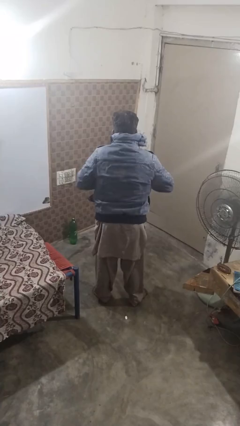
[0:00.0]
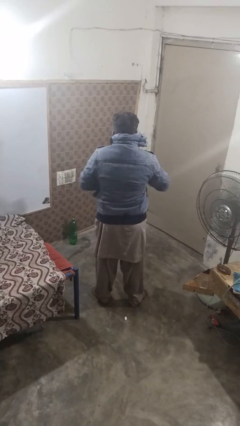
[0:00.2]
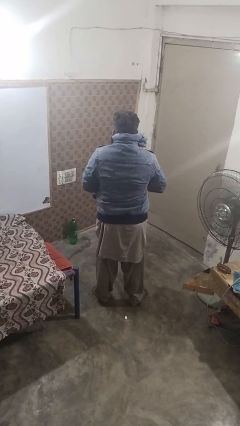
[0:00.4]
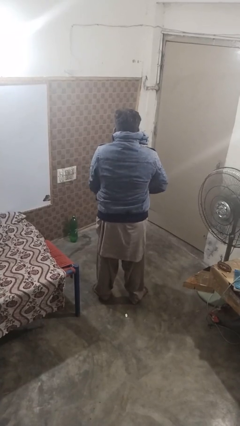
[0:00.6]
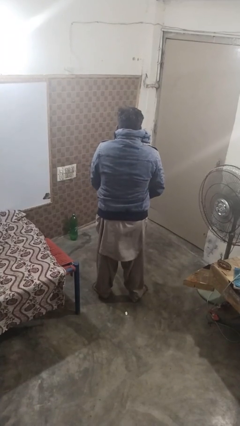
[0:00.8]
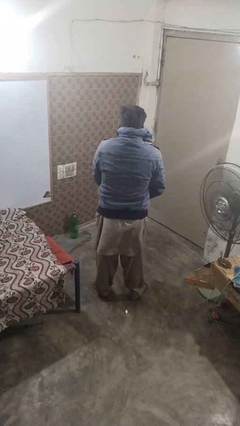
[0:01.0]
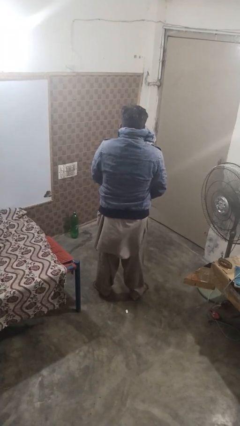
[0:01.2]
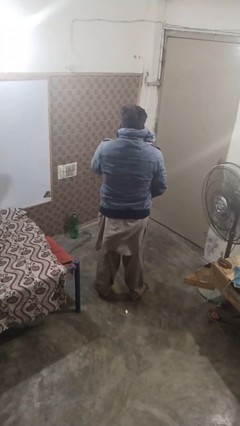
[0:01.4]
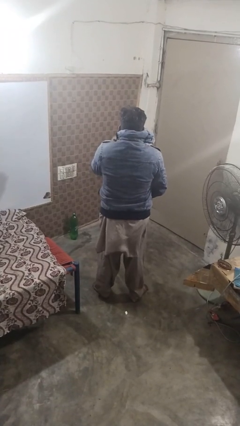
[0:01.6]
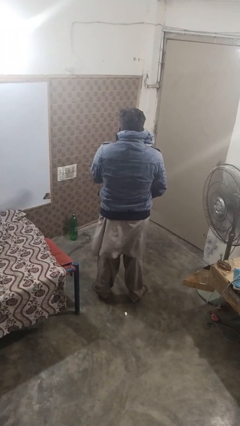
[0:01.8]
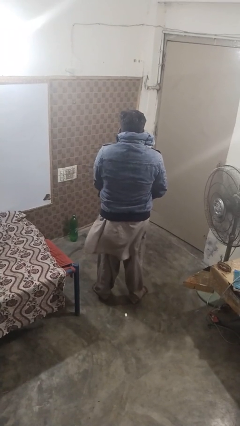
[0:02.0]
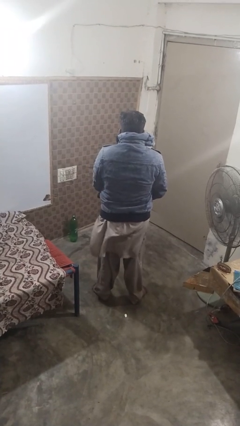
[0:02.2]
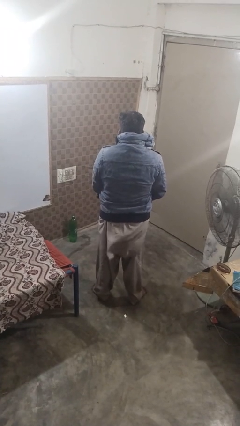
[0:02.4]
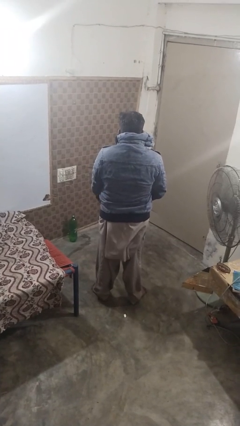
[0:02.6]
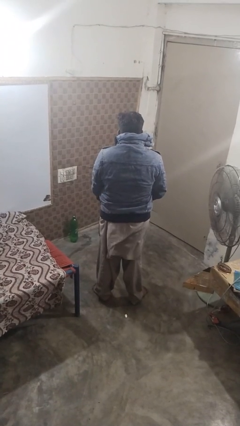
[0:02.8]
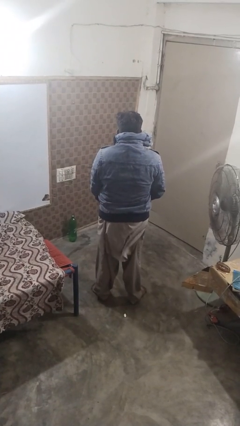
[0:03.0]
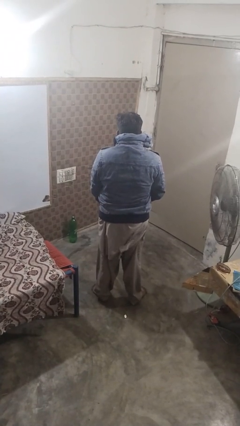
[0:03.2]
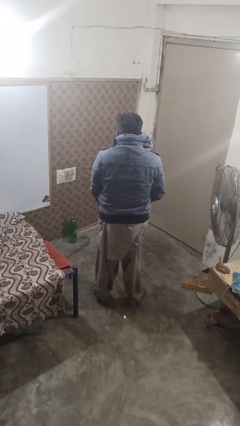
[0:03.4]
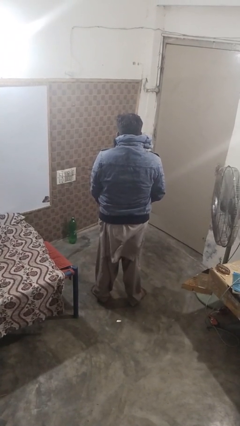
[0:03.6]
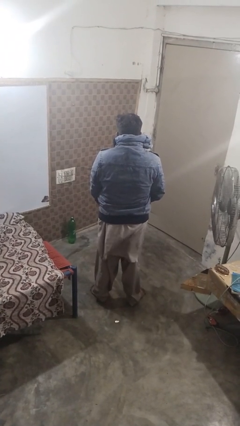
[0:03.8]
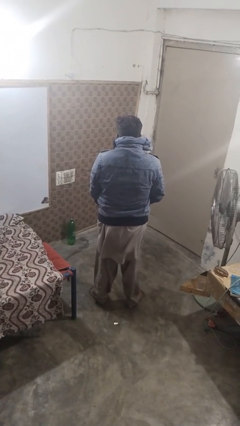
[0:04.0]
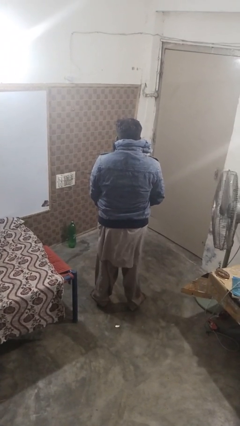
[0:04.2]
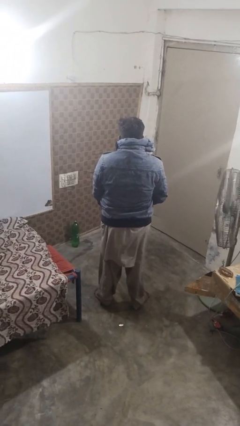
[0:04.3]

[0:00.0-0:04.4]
person zips up jacket

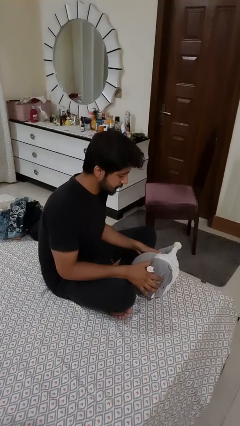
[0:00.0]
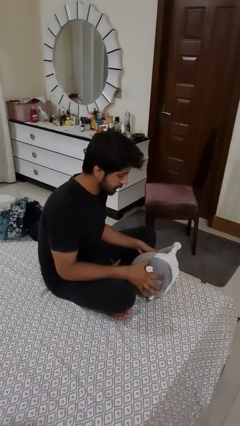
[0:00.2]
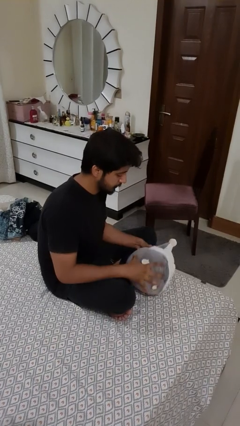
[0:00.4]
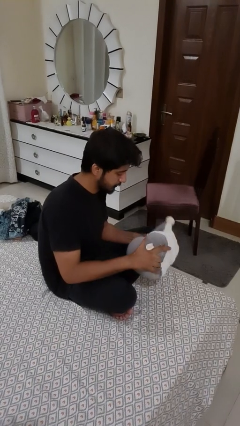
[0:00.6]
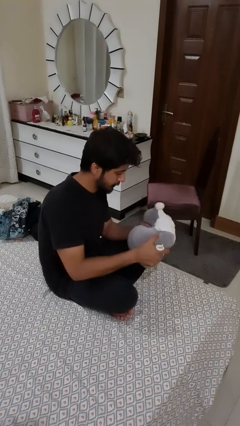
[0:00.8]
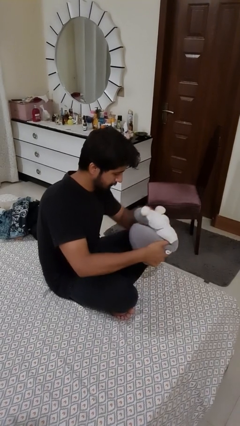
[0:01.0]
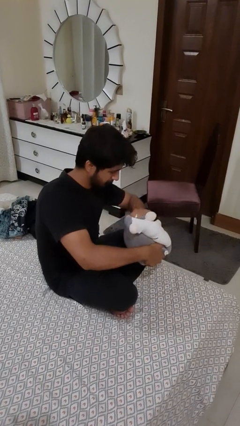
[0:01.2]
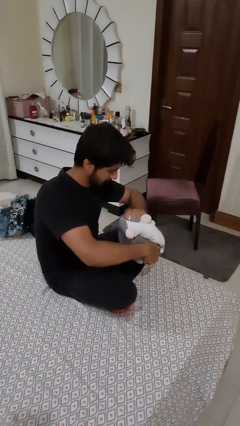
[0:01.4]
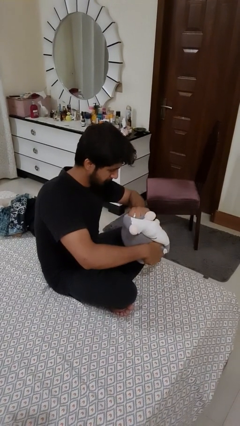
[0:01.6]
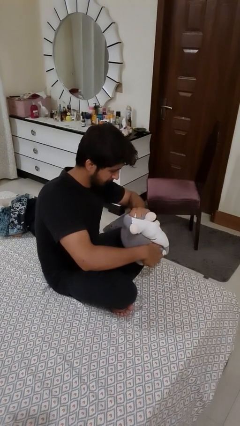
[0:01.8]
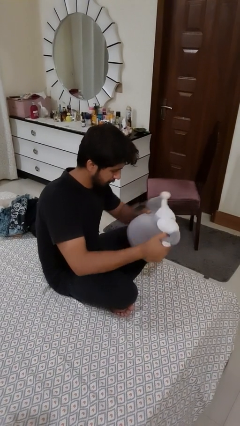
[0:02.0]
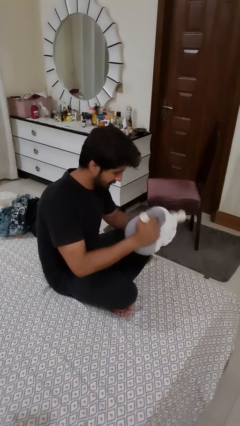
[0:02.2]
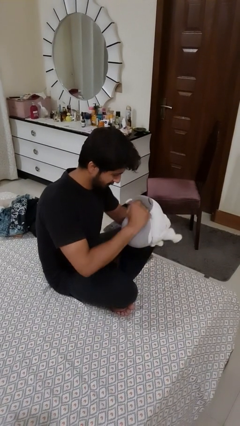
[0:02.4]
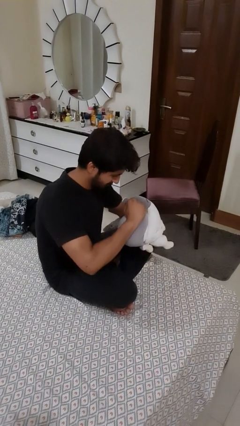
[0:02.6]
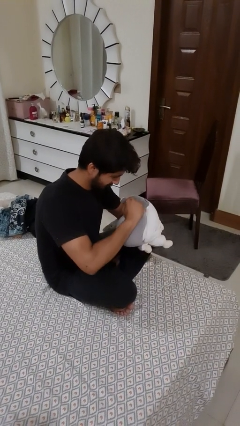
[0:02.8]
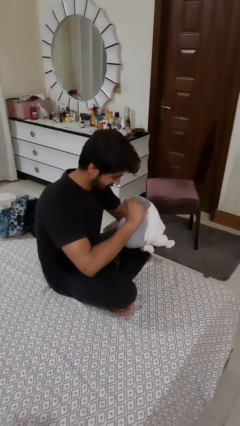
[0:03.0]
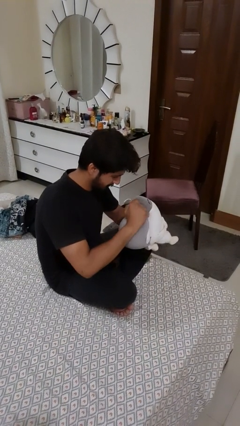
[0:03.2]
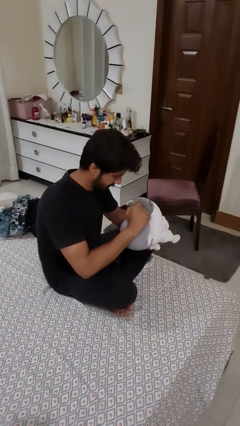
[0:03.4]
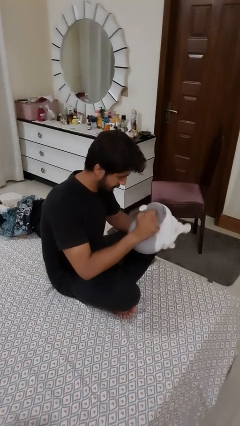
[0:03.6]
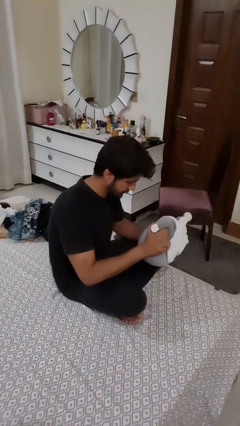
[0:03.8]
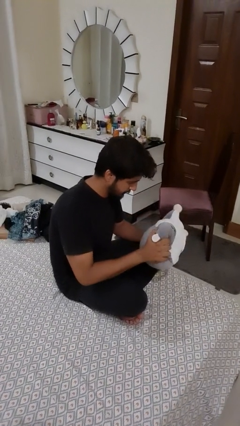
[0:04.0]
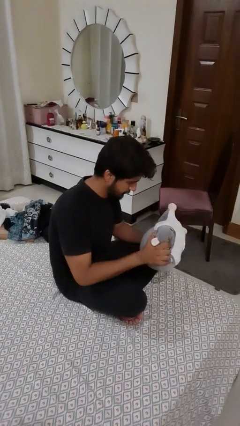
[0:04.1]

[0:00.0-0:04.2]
person squeezes object

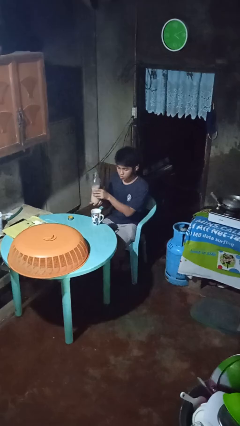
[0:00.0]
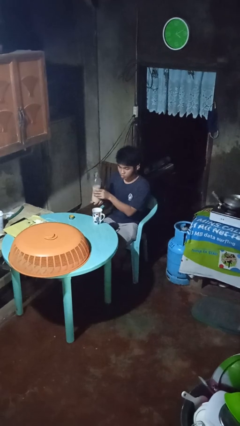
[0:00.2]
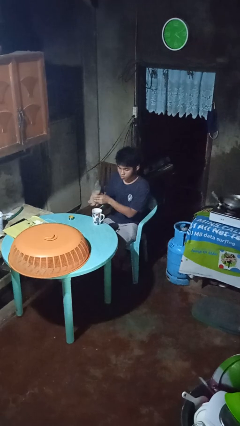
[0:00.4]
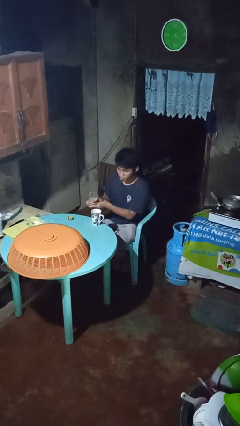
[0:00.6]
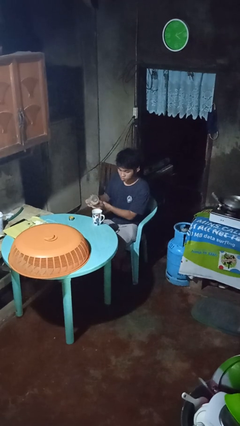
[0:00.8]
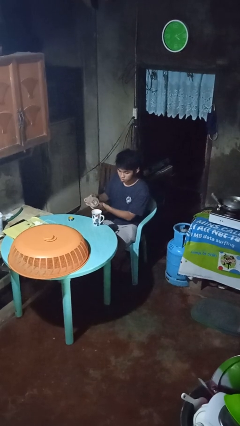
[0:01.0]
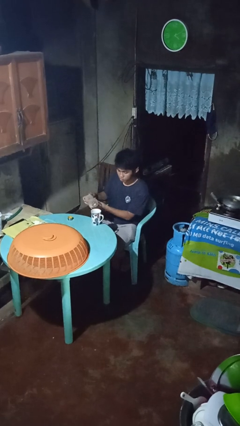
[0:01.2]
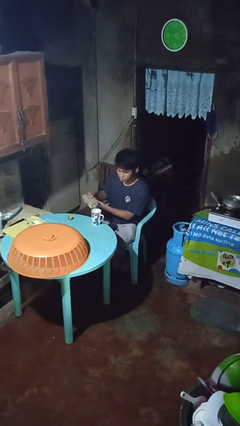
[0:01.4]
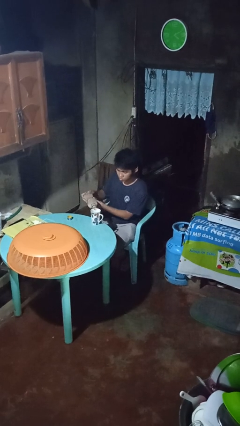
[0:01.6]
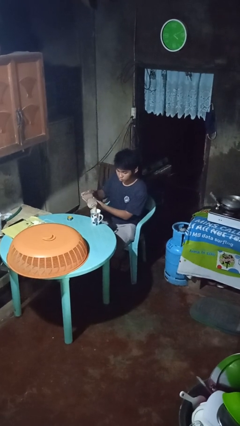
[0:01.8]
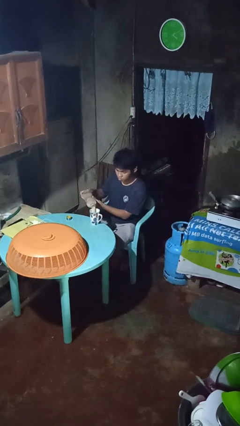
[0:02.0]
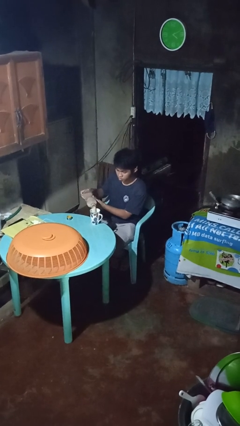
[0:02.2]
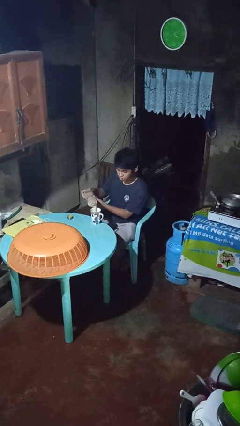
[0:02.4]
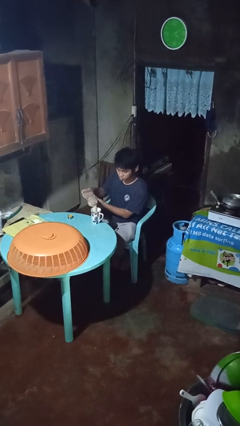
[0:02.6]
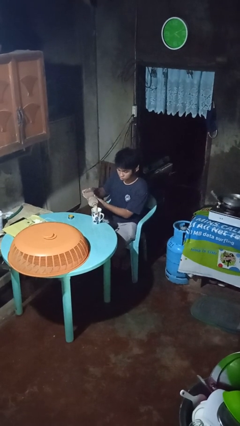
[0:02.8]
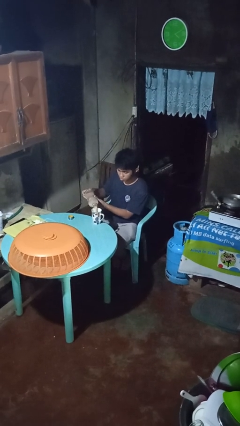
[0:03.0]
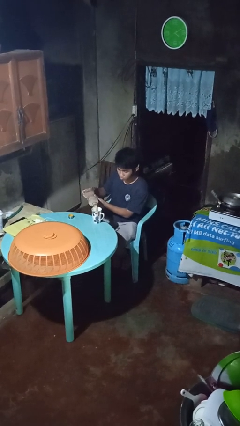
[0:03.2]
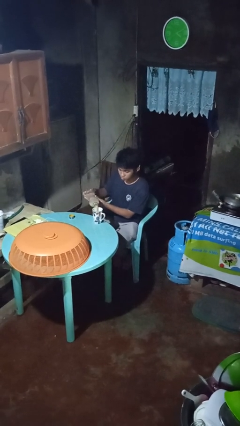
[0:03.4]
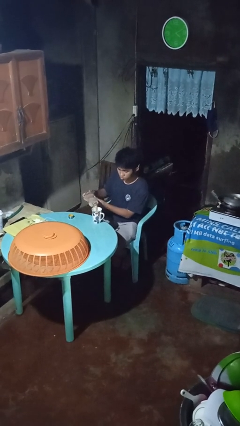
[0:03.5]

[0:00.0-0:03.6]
person pours coffee into mug

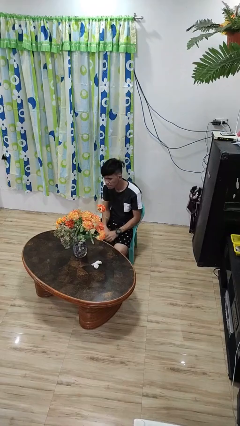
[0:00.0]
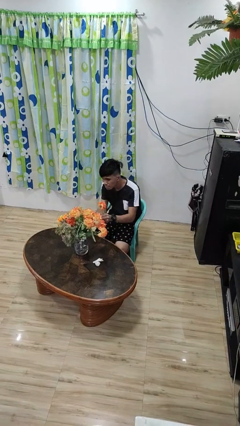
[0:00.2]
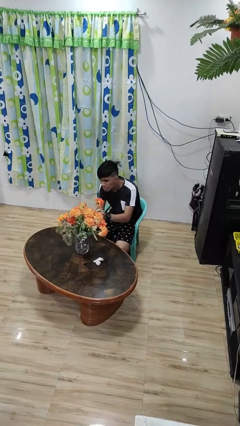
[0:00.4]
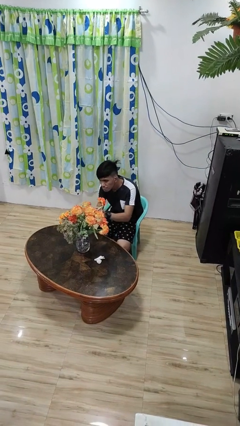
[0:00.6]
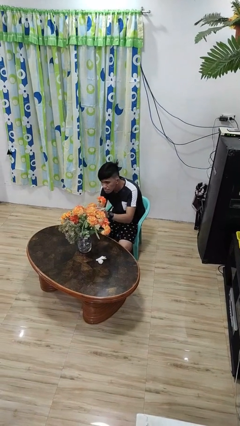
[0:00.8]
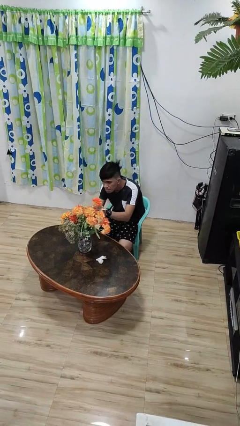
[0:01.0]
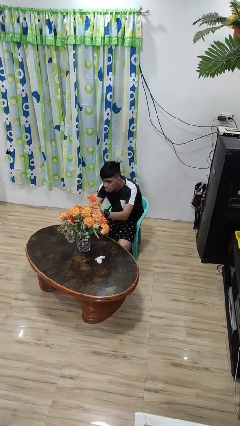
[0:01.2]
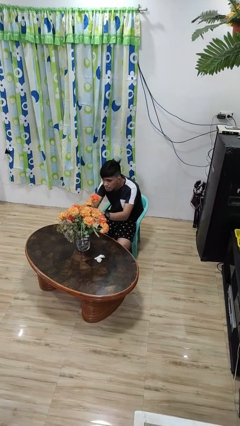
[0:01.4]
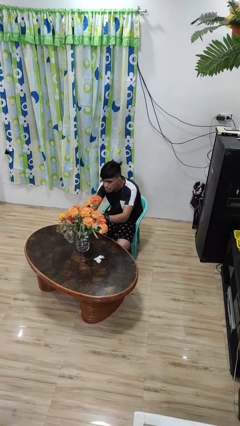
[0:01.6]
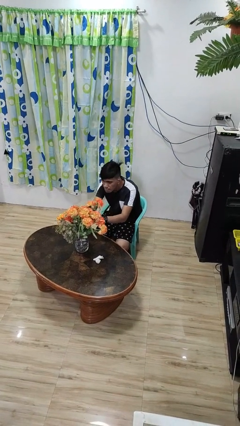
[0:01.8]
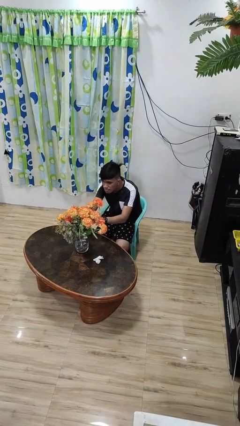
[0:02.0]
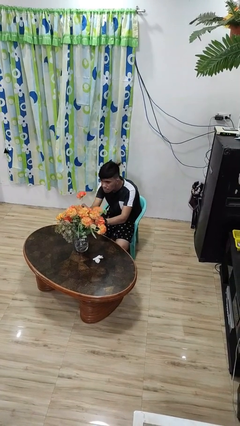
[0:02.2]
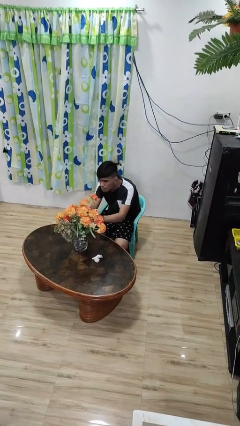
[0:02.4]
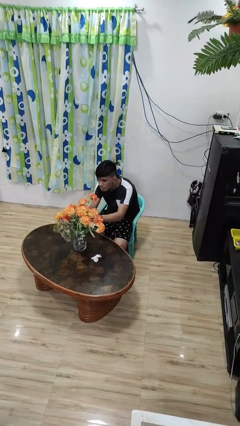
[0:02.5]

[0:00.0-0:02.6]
person arranges flowers in vase

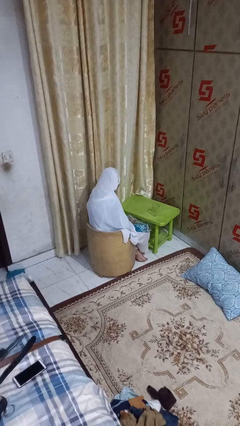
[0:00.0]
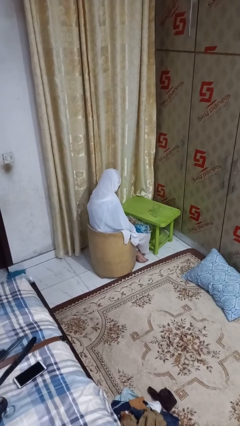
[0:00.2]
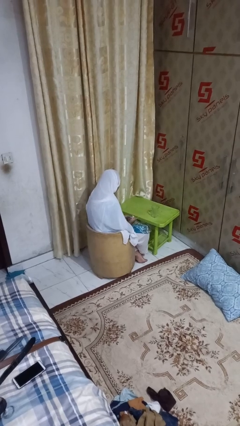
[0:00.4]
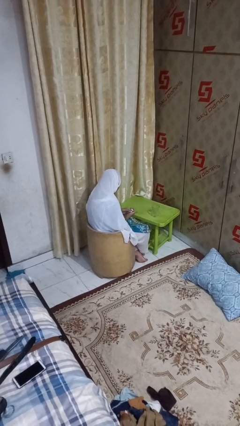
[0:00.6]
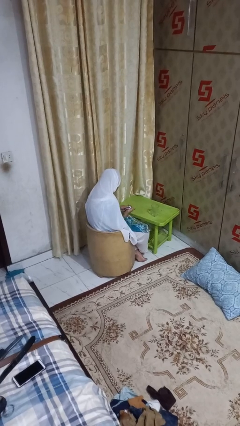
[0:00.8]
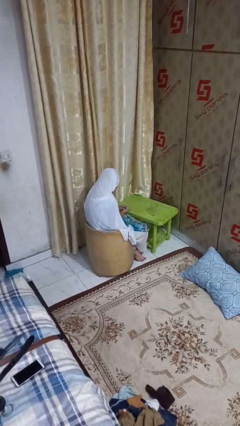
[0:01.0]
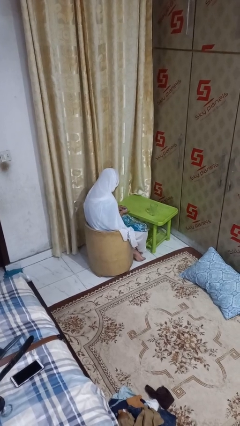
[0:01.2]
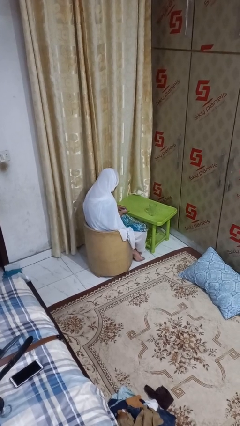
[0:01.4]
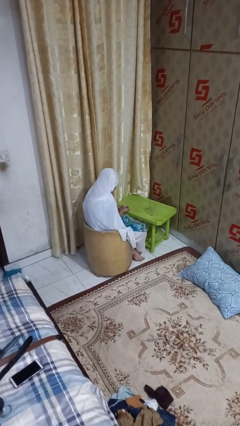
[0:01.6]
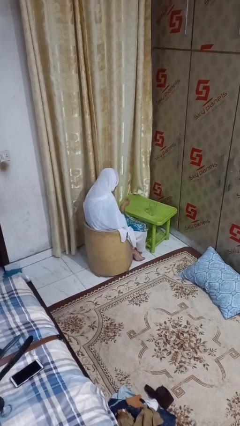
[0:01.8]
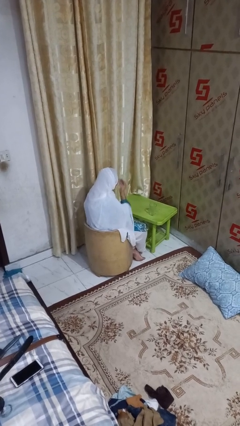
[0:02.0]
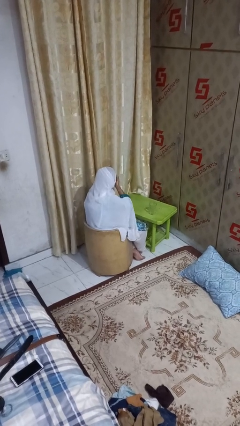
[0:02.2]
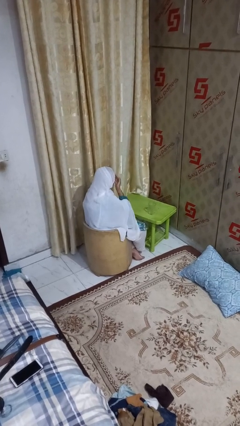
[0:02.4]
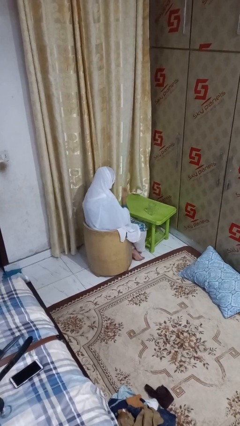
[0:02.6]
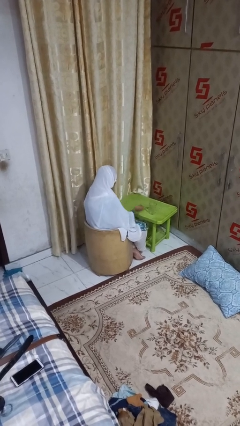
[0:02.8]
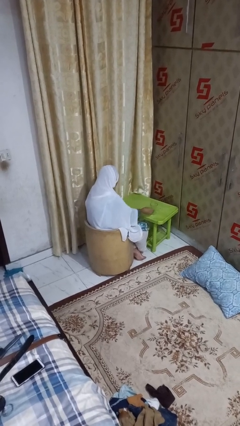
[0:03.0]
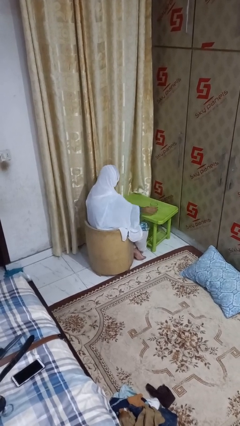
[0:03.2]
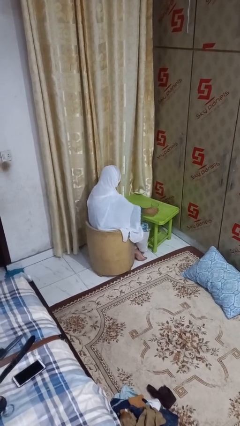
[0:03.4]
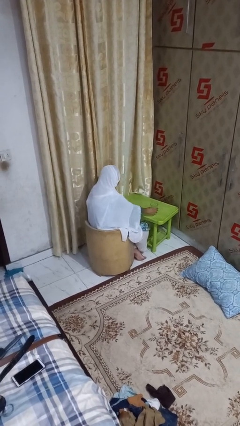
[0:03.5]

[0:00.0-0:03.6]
person takes medicine pills
